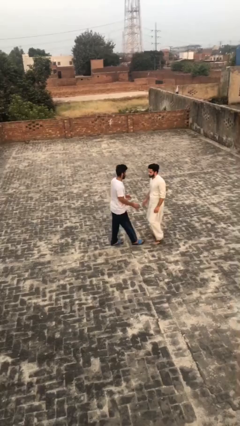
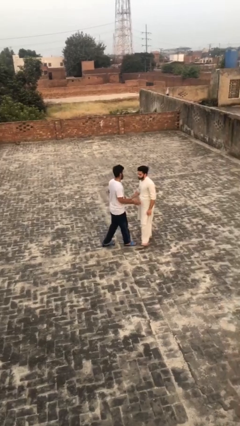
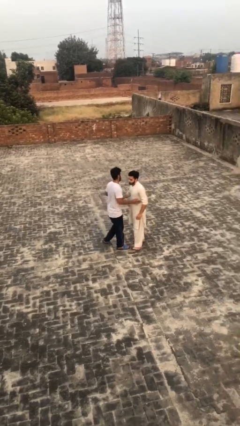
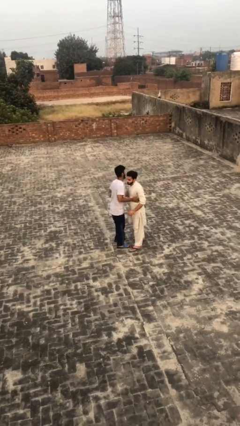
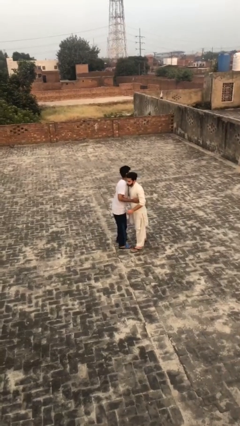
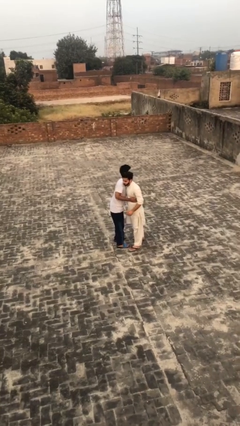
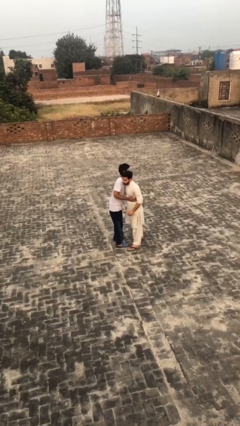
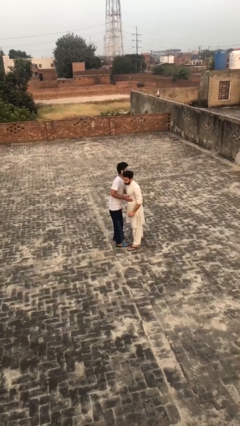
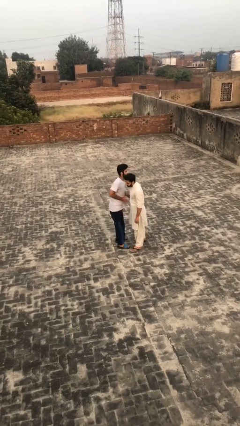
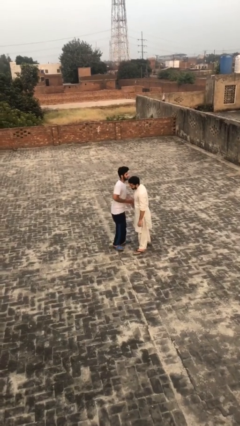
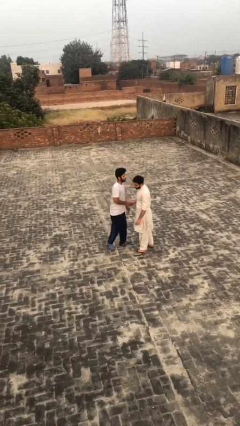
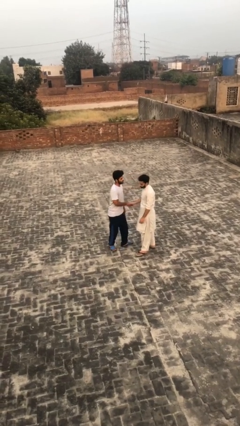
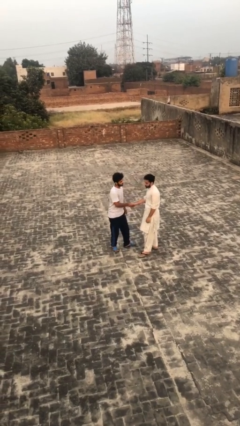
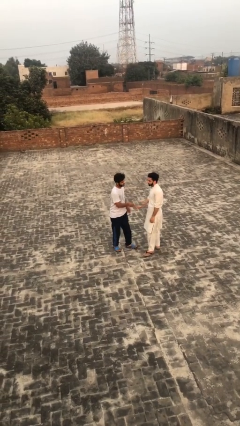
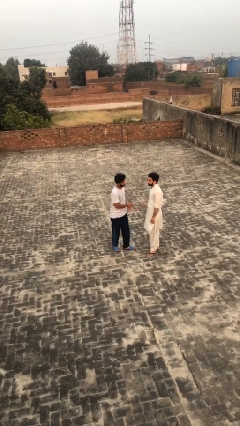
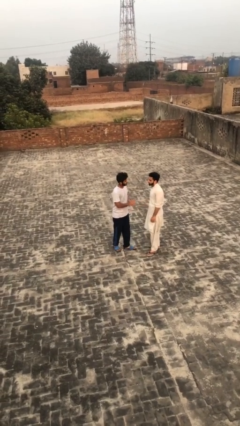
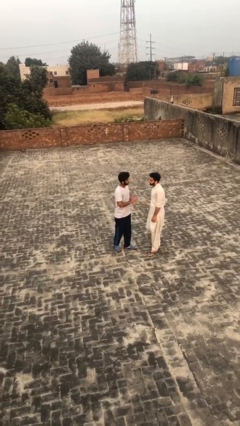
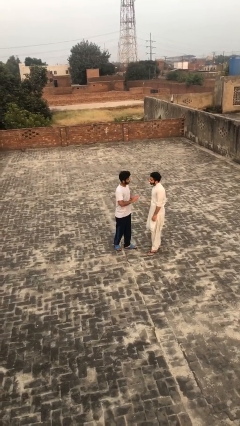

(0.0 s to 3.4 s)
person embraces person

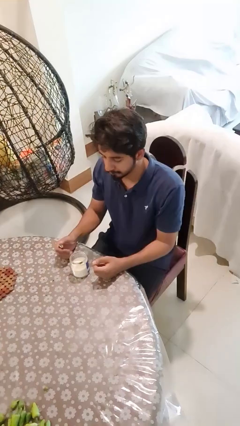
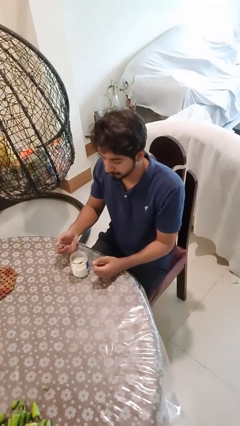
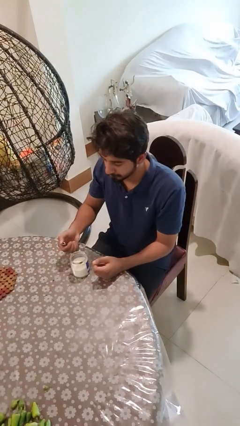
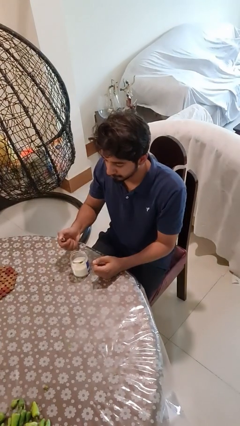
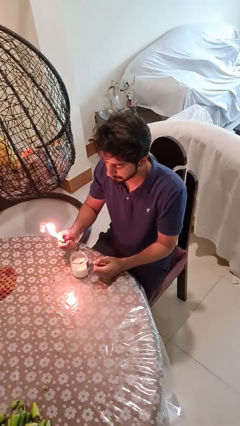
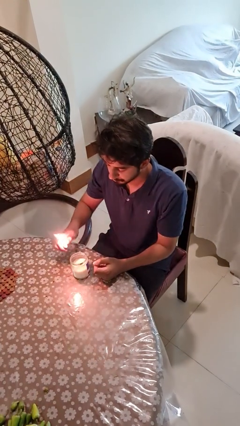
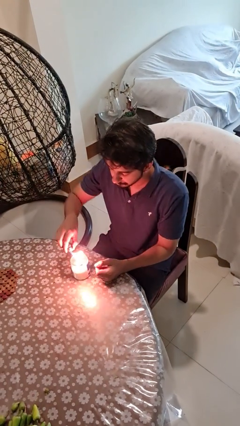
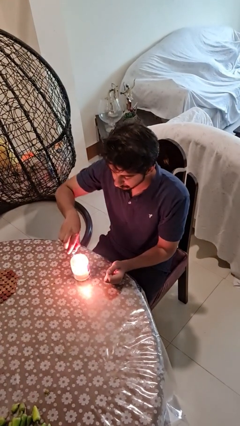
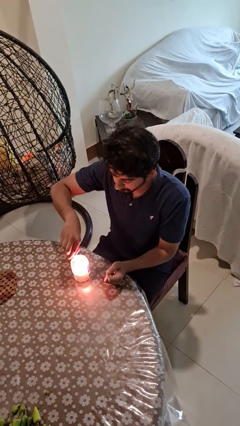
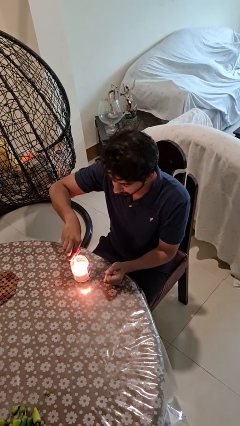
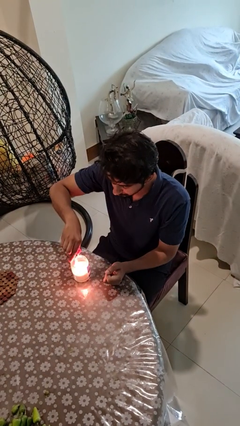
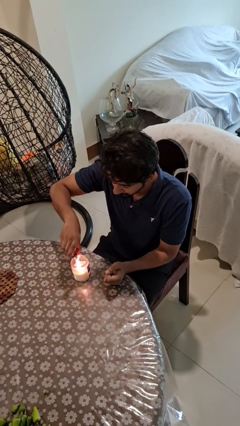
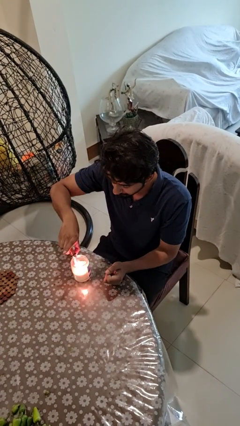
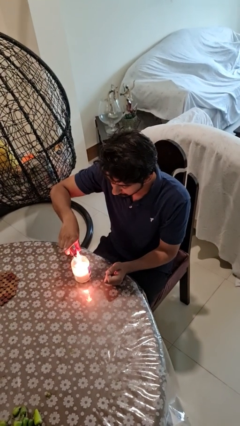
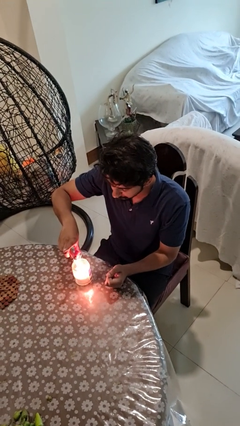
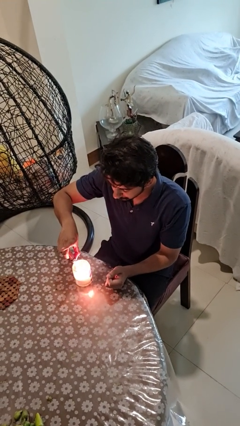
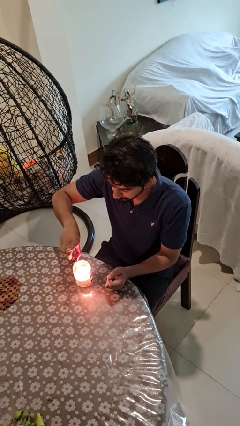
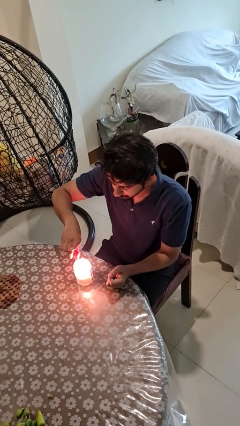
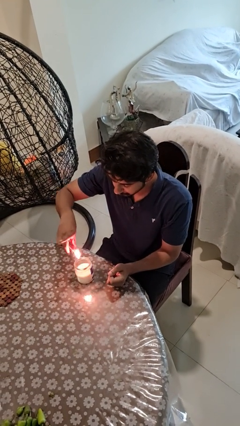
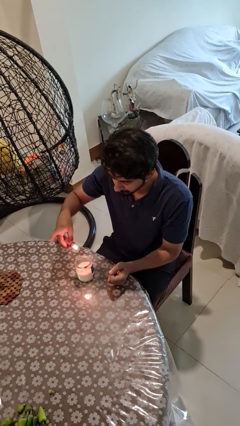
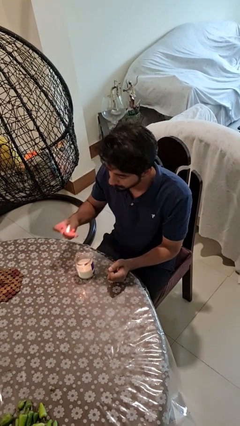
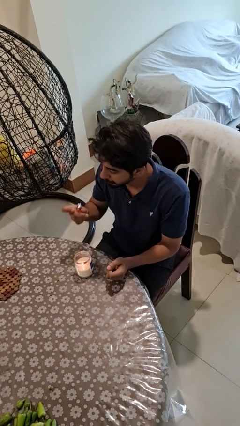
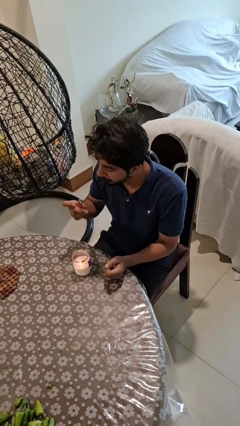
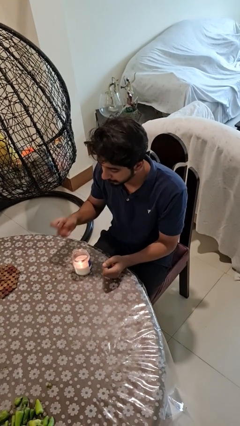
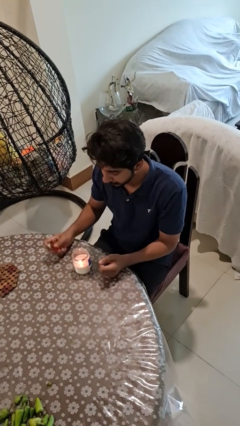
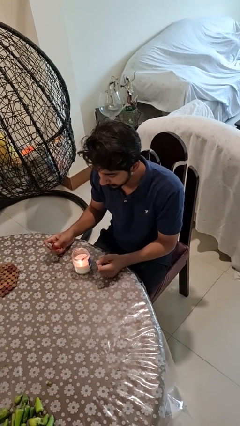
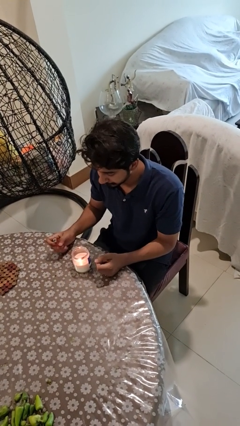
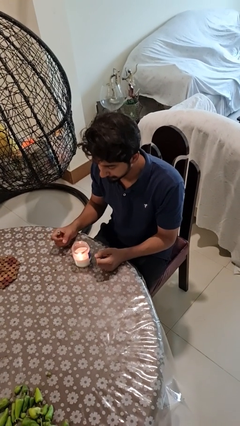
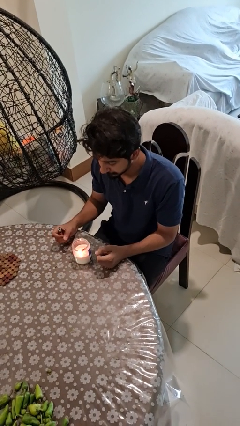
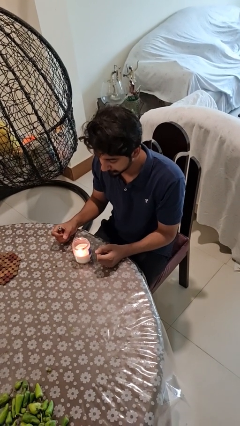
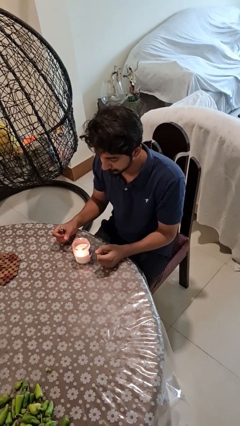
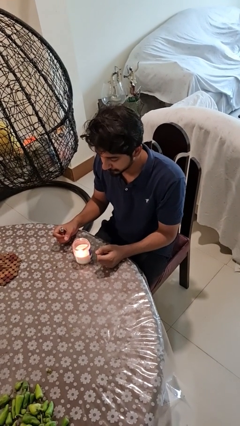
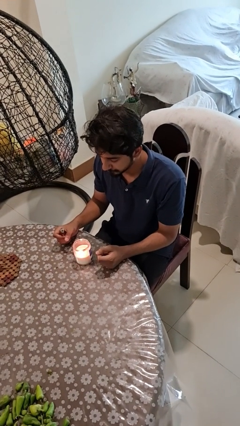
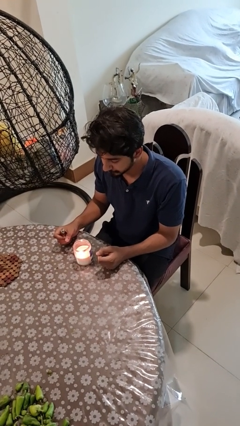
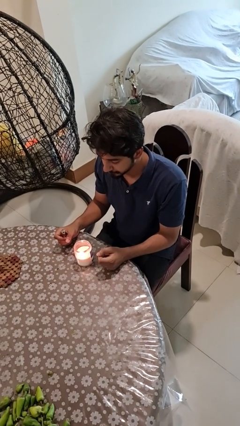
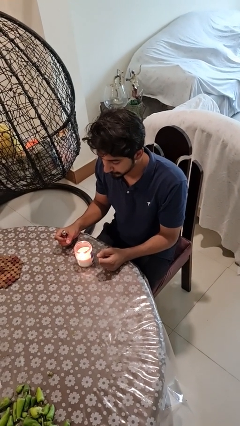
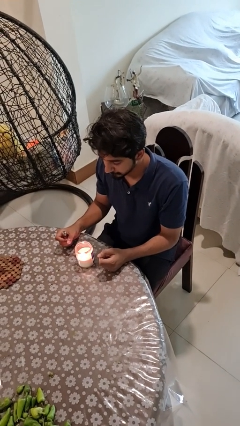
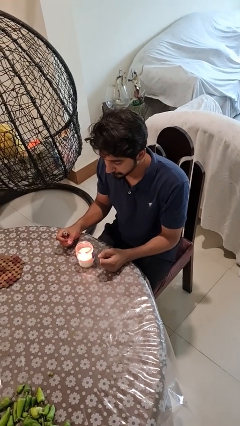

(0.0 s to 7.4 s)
person lights candle

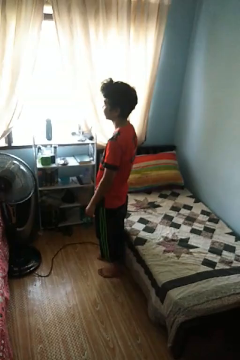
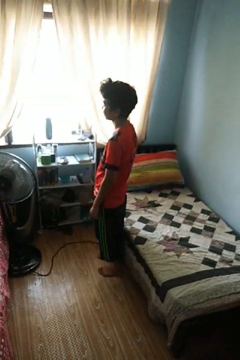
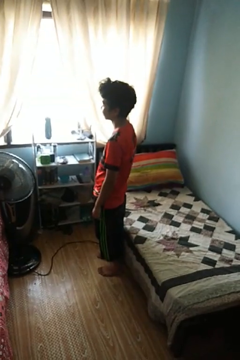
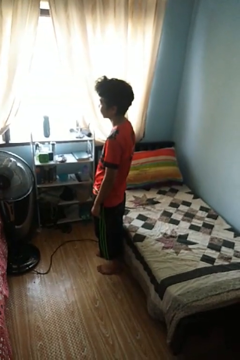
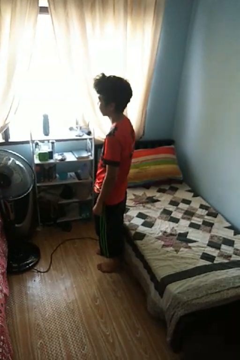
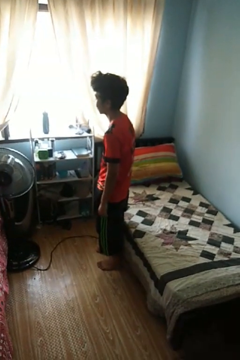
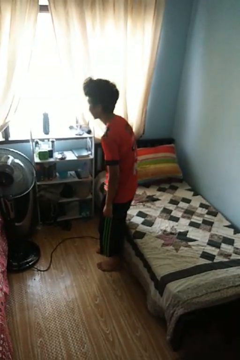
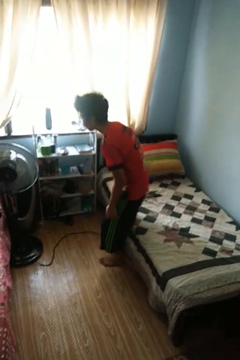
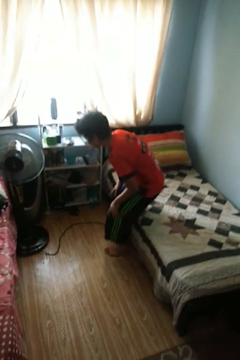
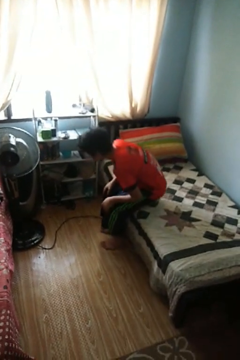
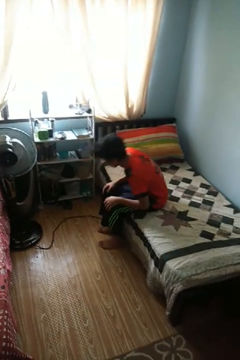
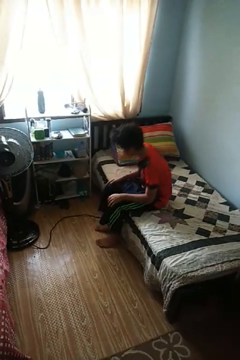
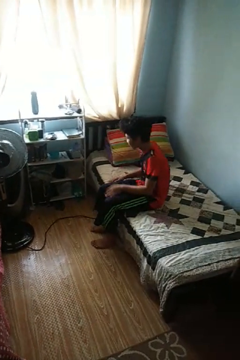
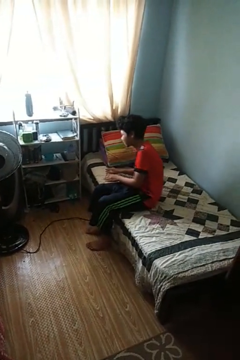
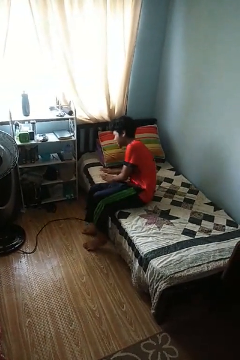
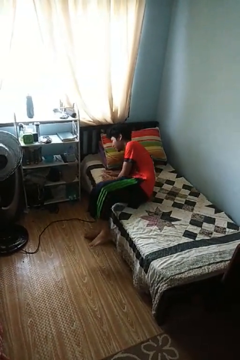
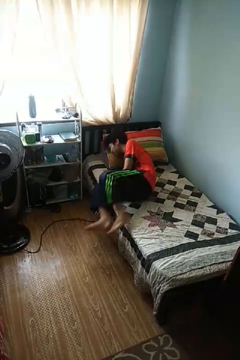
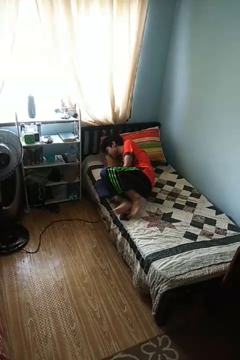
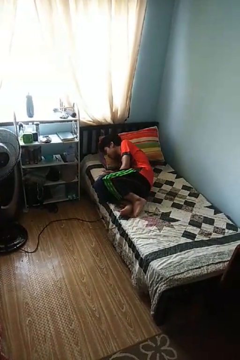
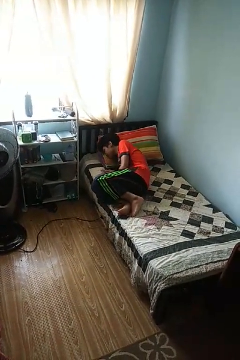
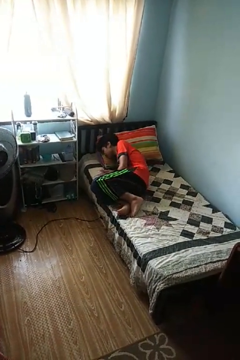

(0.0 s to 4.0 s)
person lies down on bed

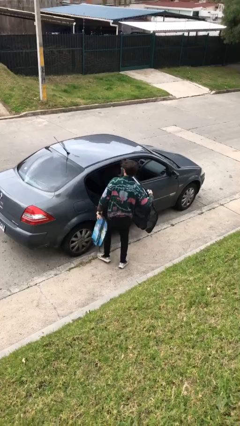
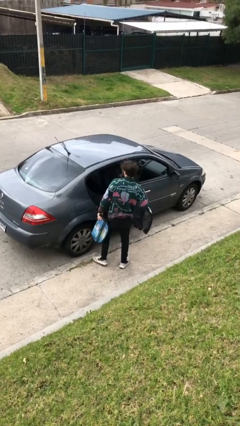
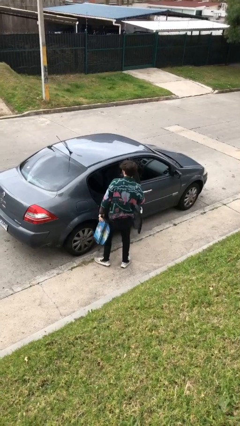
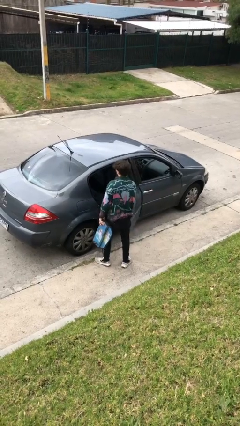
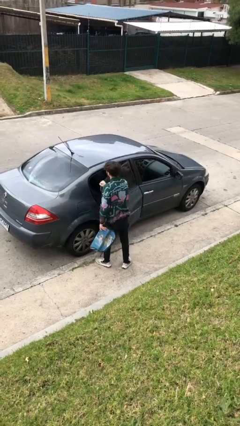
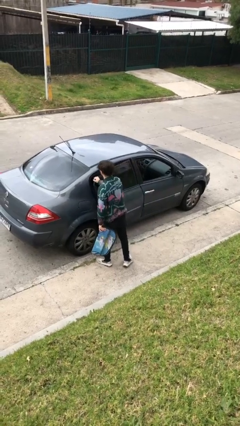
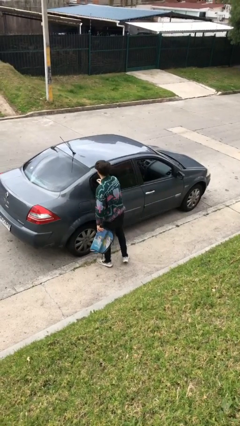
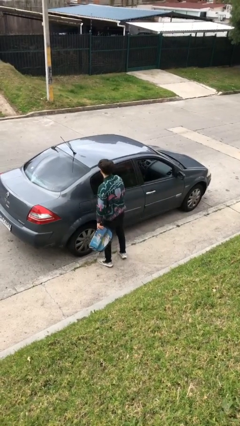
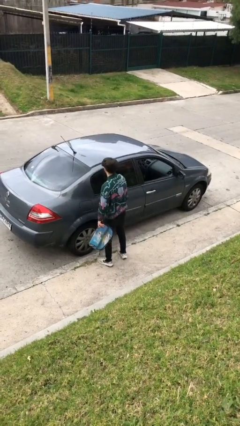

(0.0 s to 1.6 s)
person closes car door

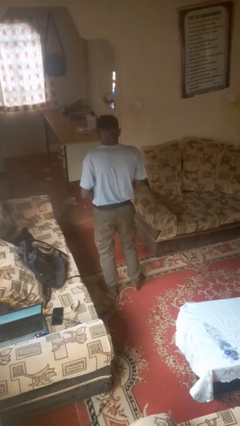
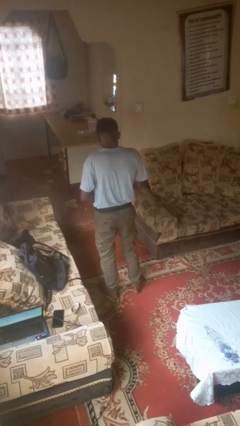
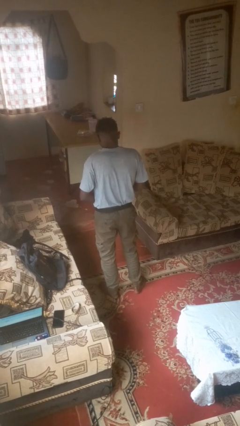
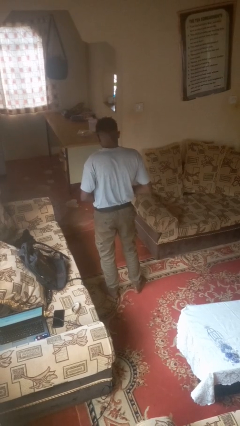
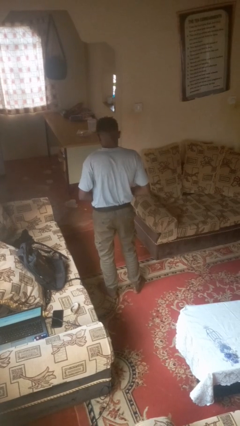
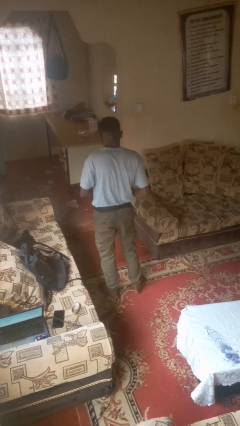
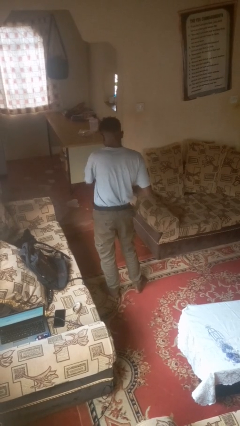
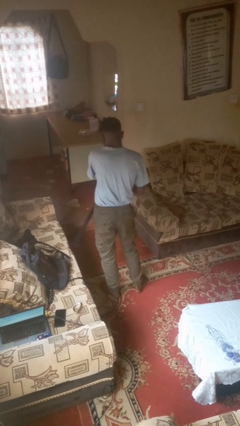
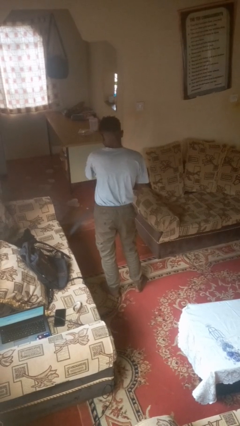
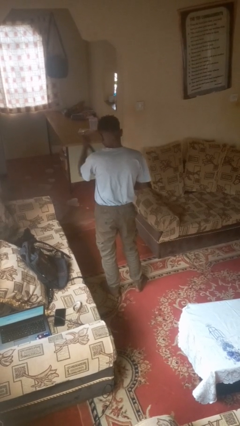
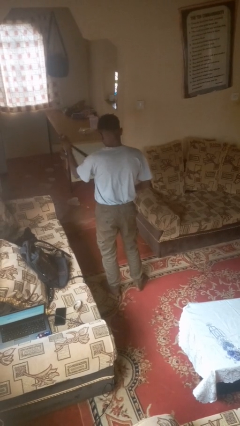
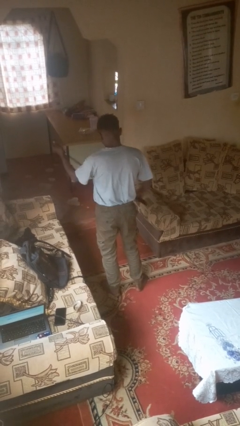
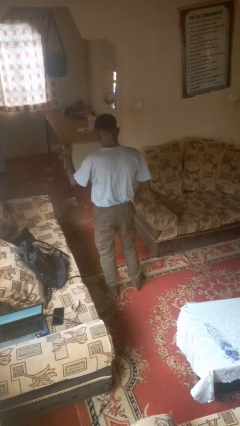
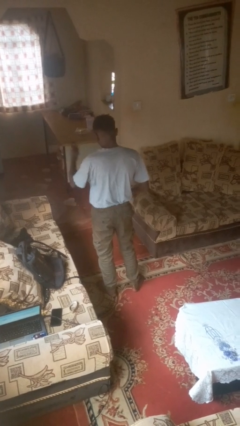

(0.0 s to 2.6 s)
person takes off belt
